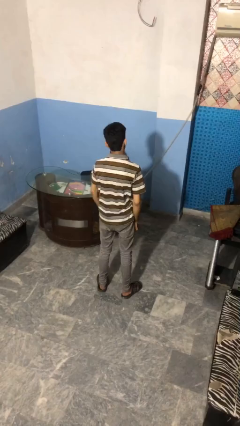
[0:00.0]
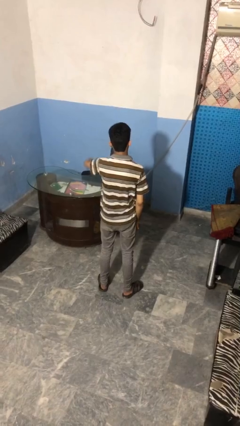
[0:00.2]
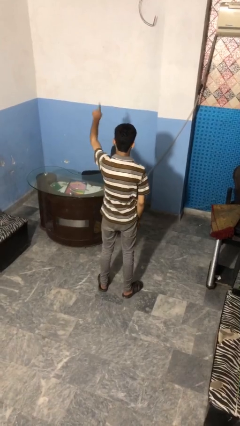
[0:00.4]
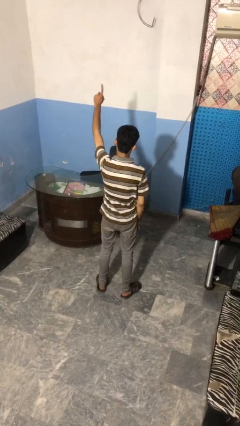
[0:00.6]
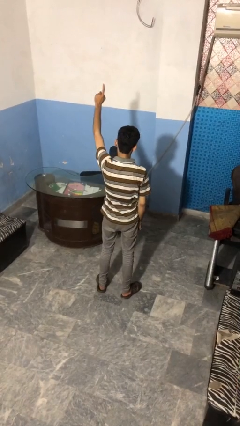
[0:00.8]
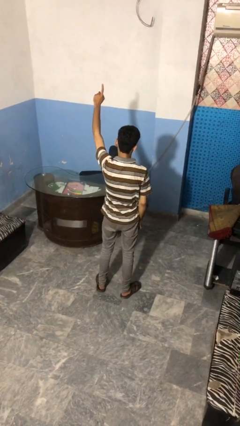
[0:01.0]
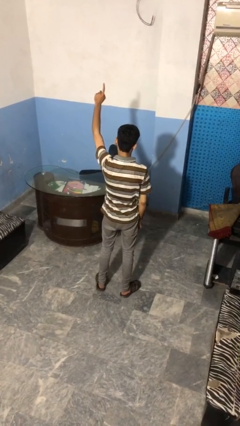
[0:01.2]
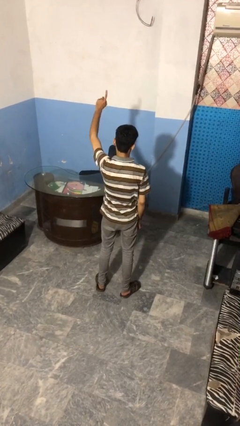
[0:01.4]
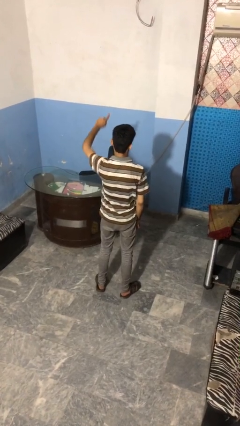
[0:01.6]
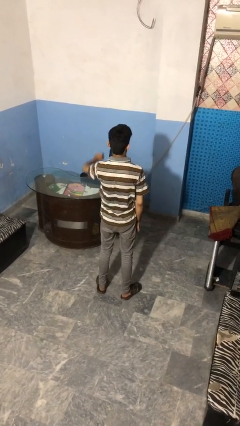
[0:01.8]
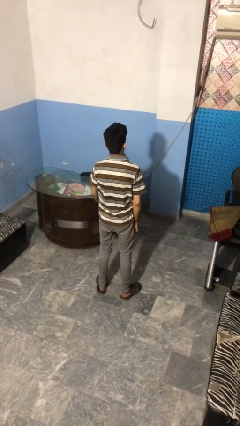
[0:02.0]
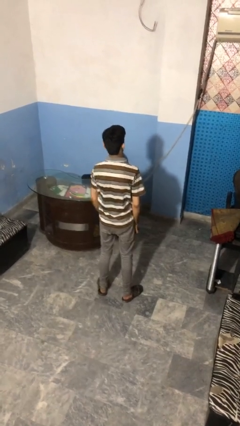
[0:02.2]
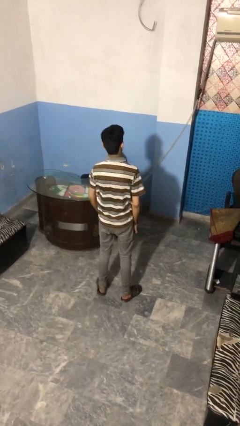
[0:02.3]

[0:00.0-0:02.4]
person gestures number one

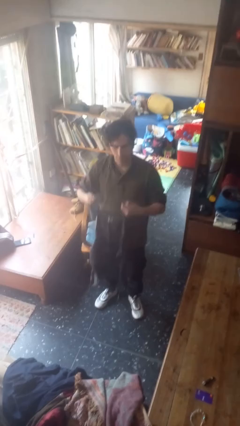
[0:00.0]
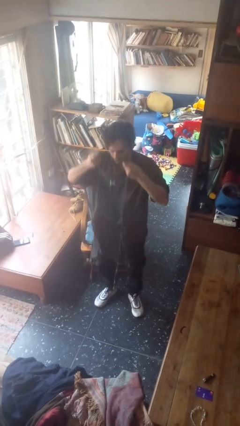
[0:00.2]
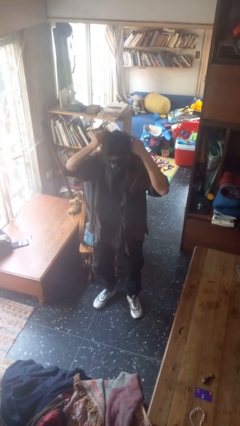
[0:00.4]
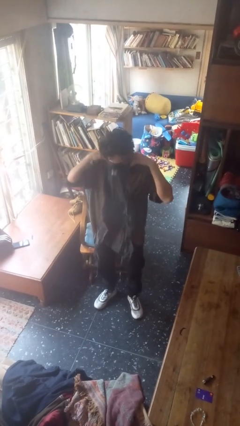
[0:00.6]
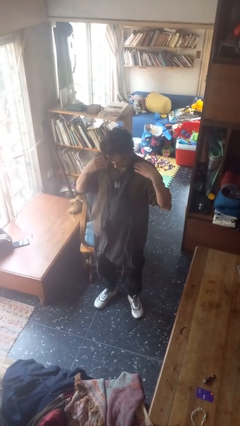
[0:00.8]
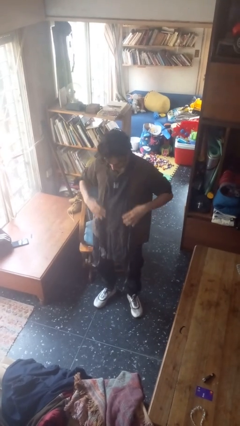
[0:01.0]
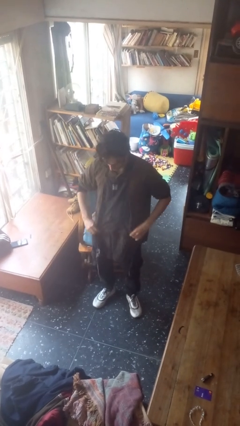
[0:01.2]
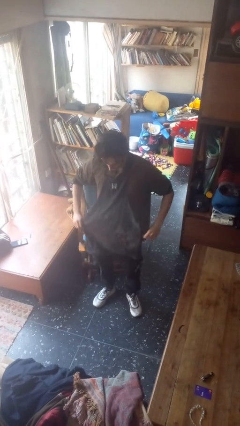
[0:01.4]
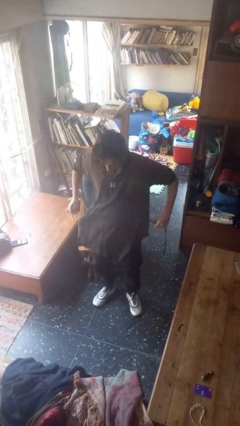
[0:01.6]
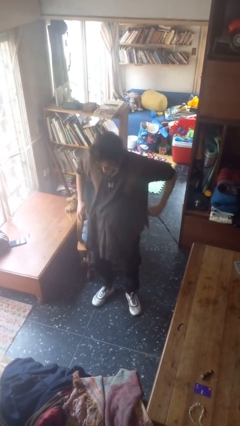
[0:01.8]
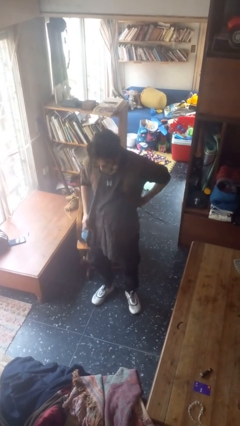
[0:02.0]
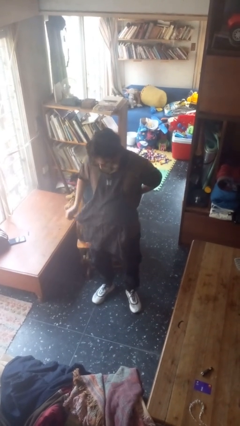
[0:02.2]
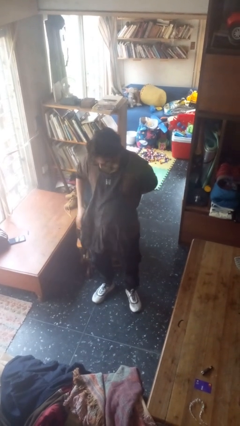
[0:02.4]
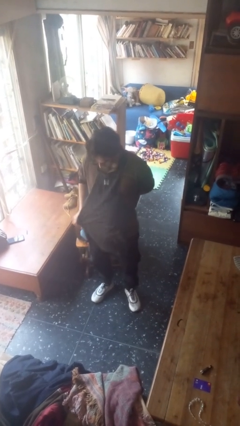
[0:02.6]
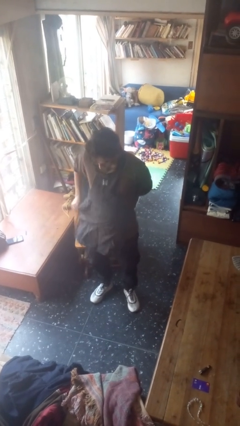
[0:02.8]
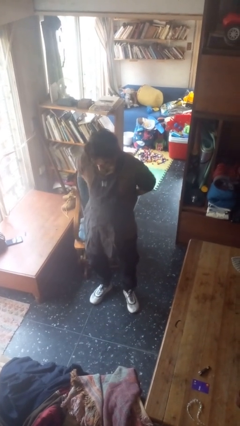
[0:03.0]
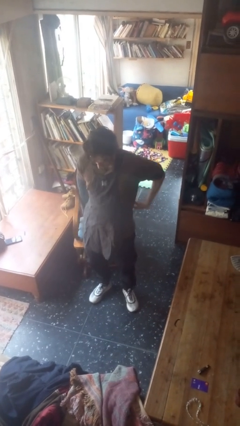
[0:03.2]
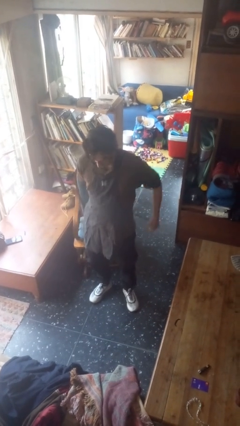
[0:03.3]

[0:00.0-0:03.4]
person puts on apron

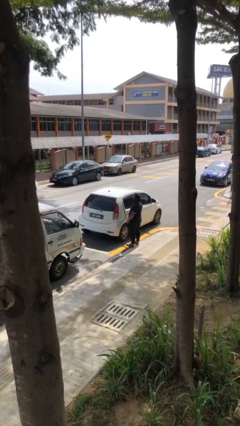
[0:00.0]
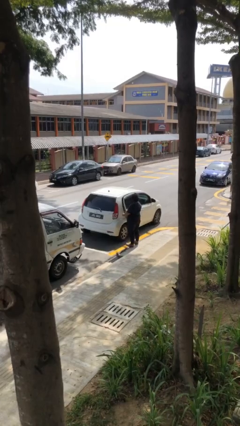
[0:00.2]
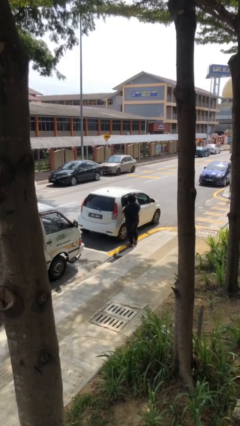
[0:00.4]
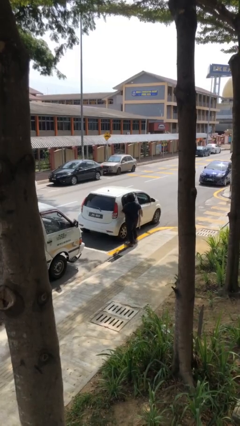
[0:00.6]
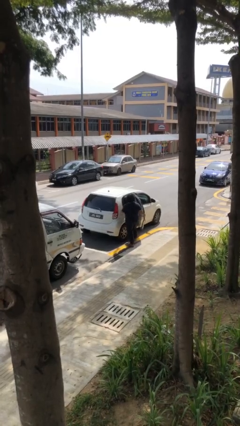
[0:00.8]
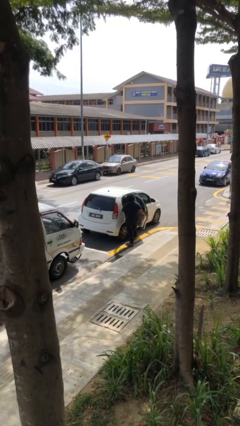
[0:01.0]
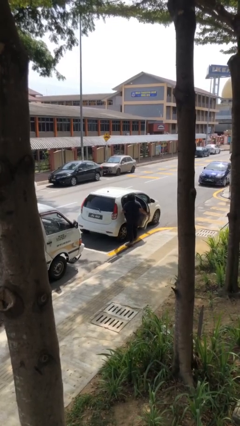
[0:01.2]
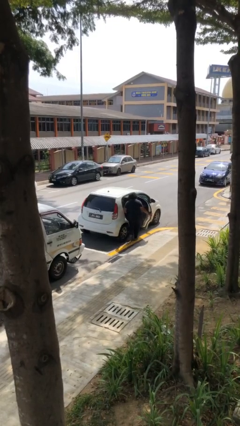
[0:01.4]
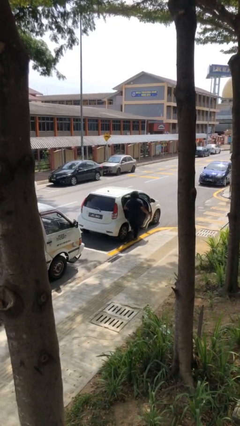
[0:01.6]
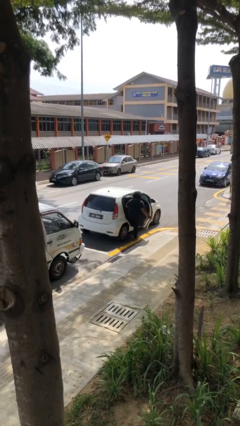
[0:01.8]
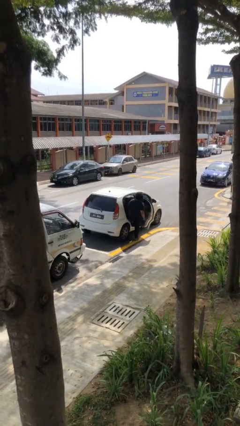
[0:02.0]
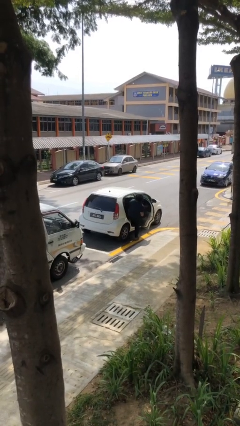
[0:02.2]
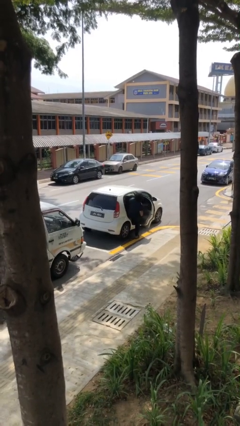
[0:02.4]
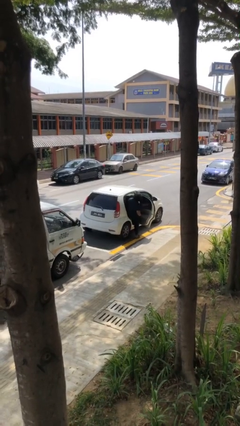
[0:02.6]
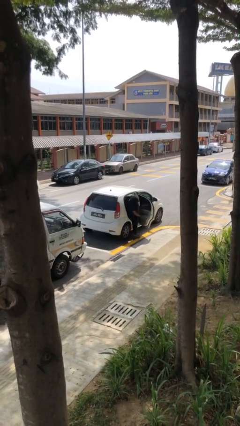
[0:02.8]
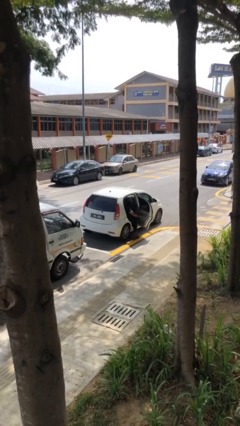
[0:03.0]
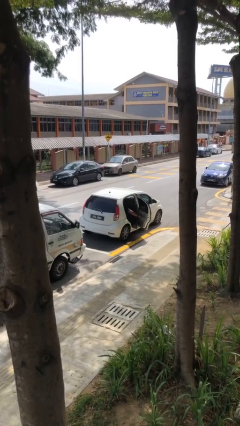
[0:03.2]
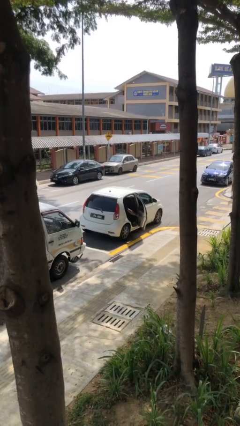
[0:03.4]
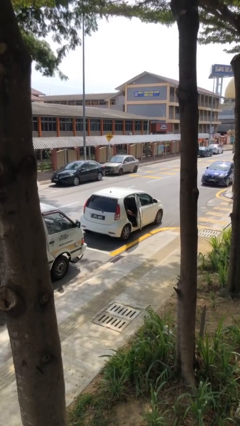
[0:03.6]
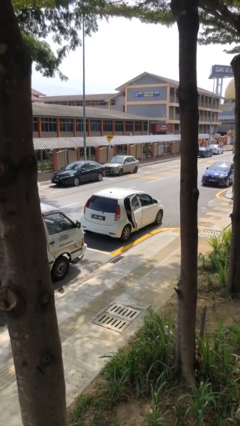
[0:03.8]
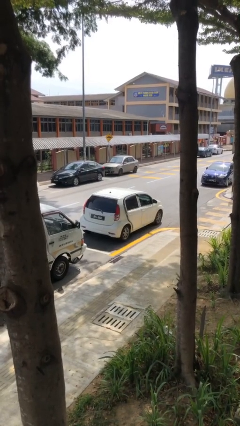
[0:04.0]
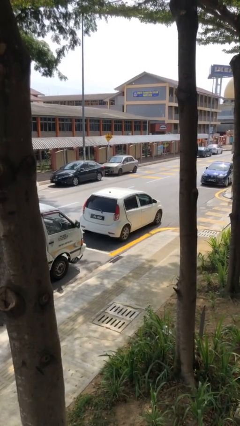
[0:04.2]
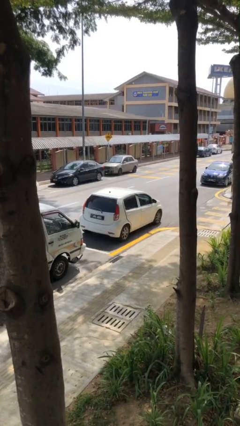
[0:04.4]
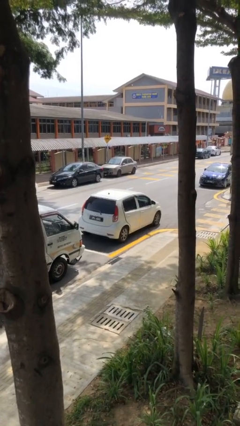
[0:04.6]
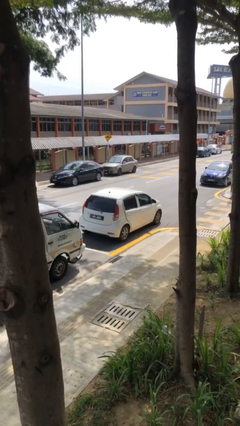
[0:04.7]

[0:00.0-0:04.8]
car picks up person

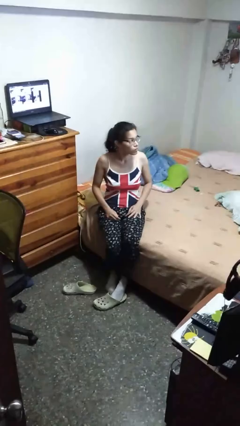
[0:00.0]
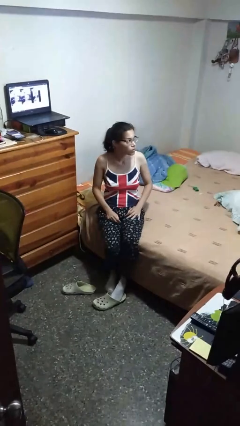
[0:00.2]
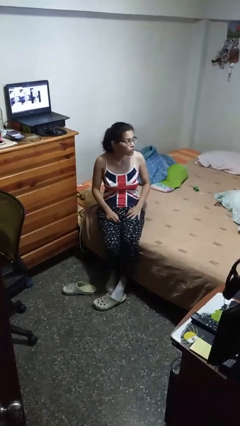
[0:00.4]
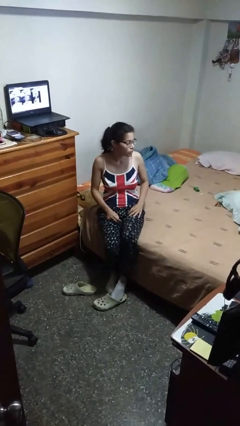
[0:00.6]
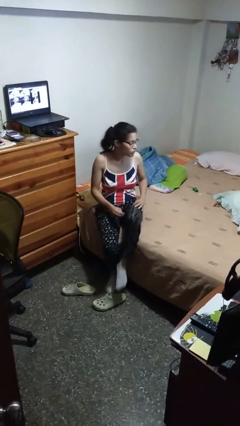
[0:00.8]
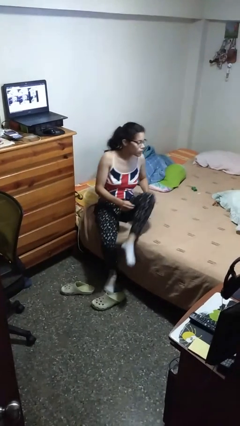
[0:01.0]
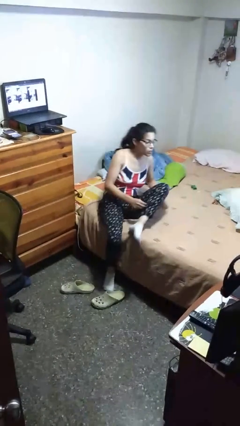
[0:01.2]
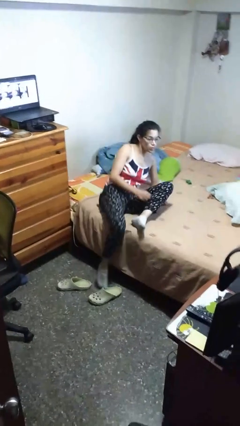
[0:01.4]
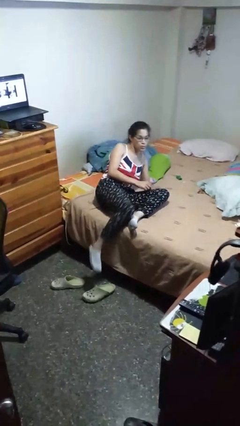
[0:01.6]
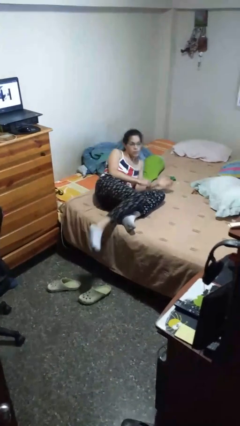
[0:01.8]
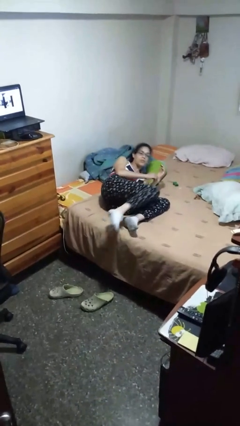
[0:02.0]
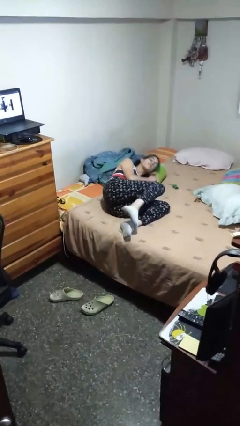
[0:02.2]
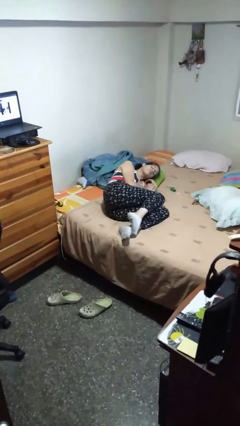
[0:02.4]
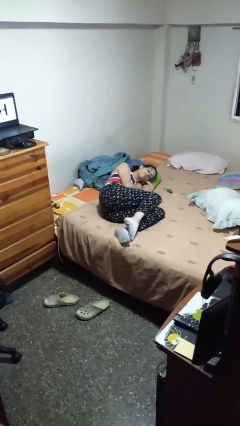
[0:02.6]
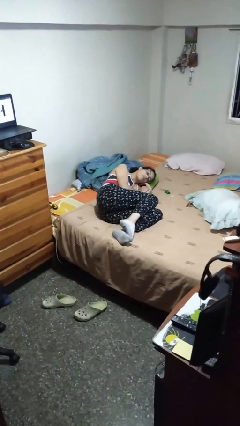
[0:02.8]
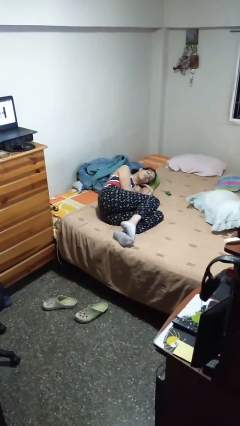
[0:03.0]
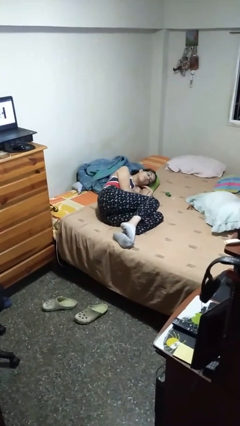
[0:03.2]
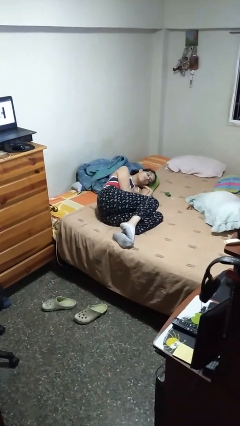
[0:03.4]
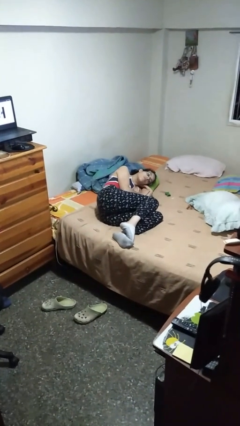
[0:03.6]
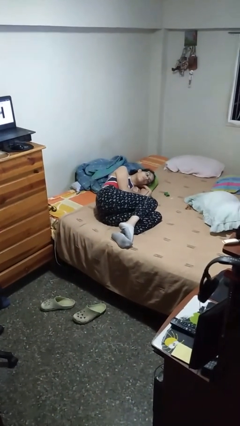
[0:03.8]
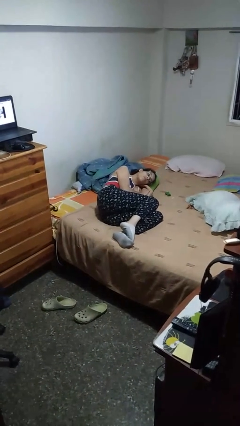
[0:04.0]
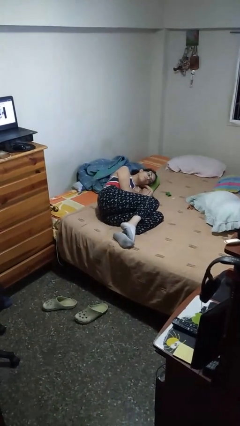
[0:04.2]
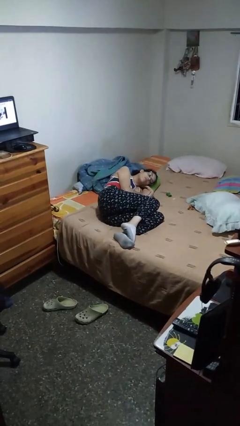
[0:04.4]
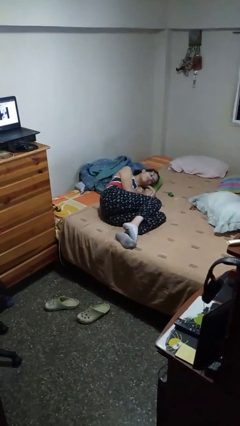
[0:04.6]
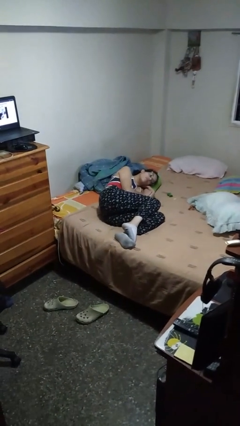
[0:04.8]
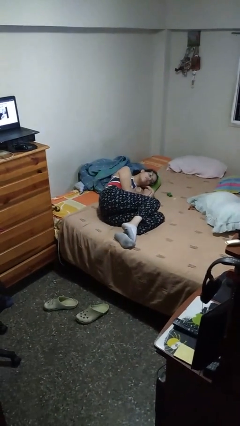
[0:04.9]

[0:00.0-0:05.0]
person lies down on bed

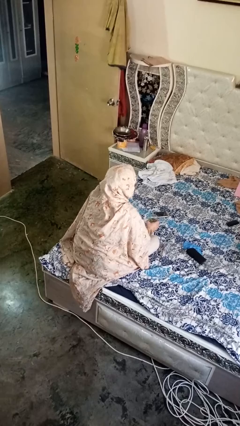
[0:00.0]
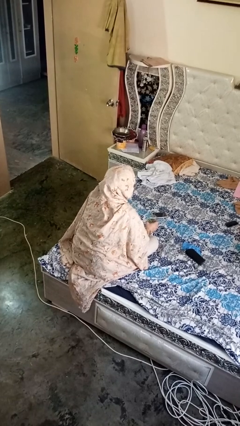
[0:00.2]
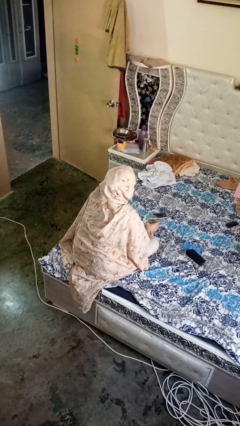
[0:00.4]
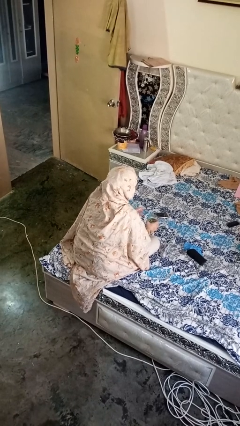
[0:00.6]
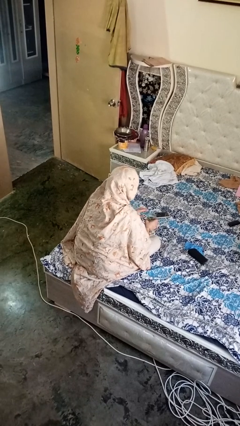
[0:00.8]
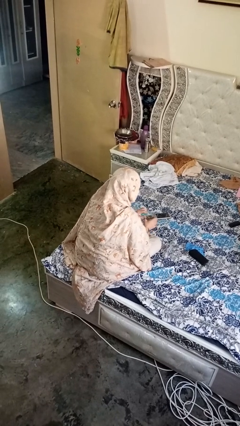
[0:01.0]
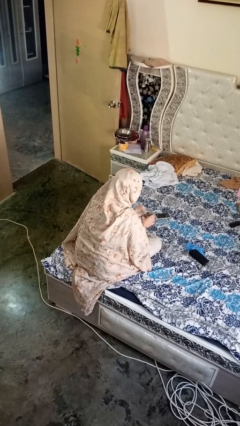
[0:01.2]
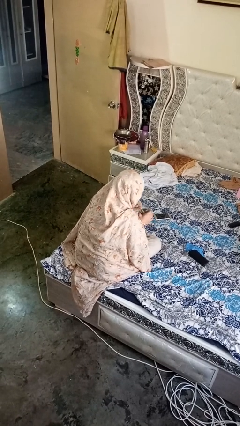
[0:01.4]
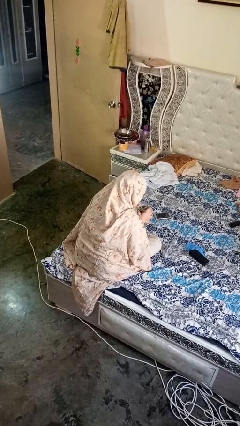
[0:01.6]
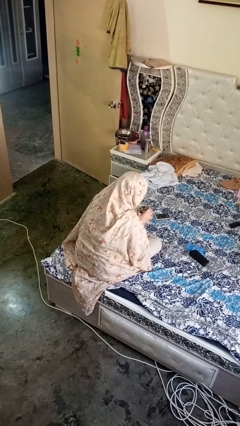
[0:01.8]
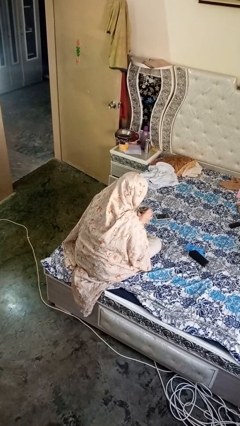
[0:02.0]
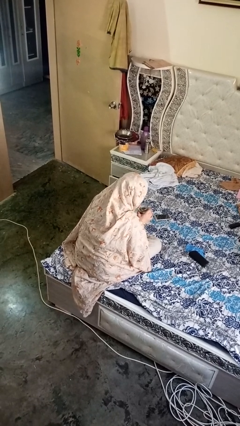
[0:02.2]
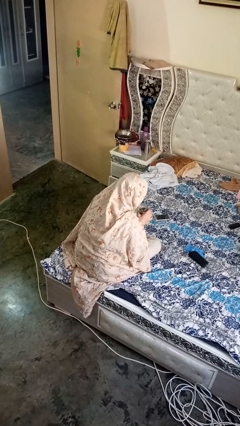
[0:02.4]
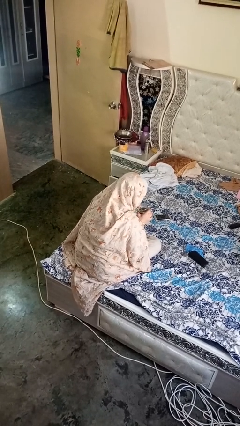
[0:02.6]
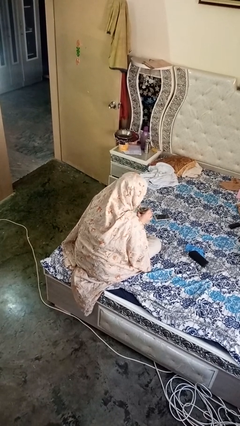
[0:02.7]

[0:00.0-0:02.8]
person drinks from straw
